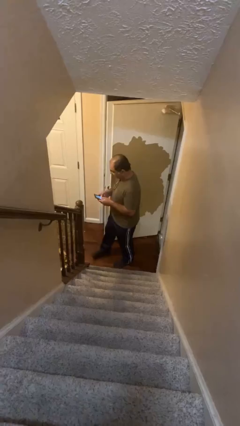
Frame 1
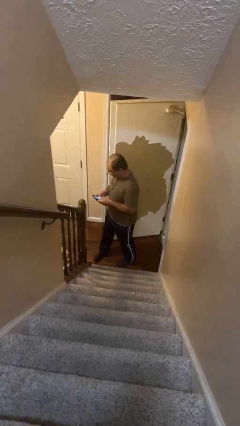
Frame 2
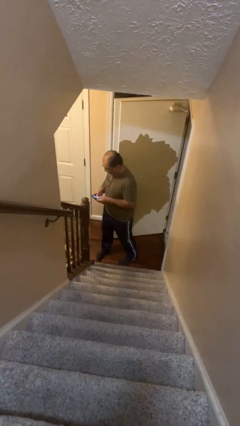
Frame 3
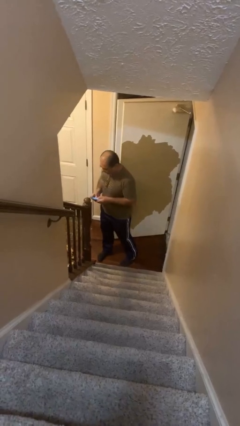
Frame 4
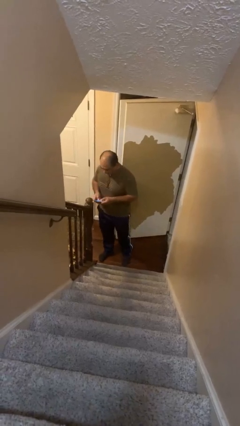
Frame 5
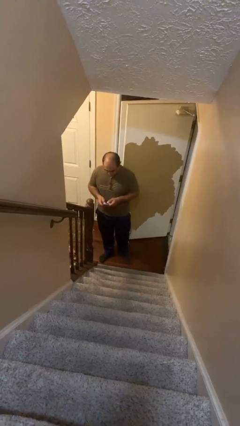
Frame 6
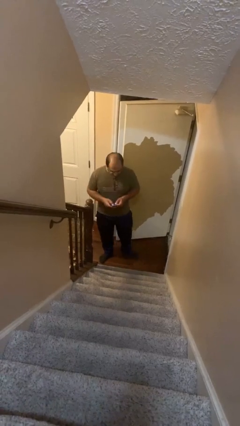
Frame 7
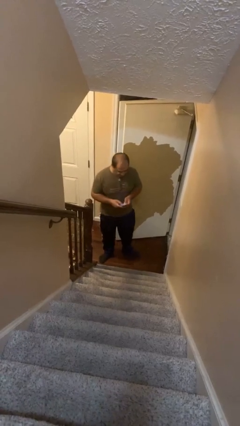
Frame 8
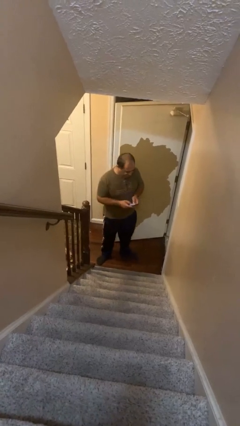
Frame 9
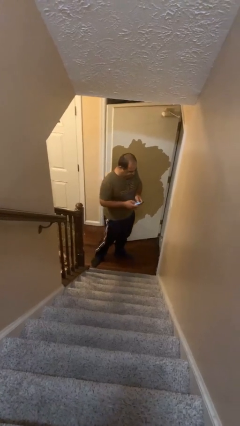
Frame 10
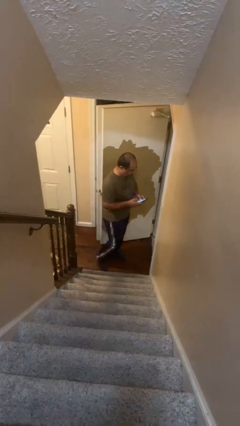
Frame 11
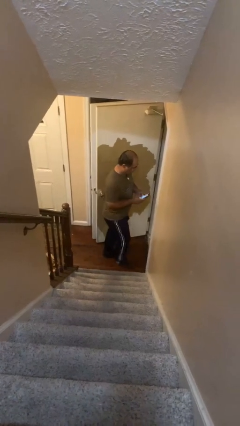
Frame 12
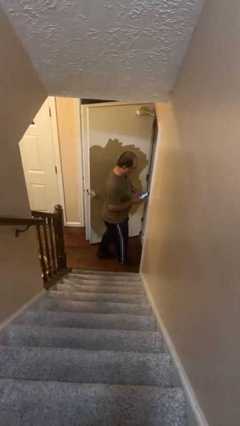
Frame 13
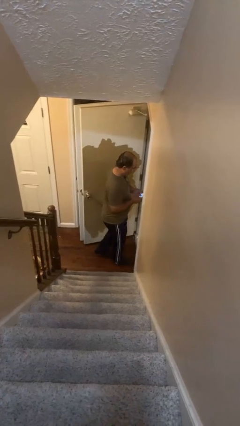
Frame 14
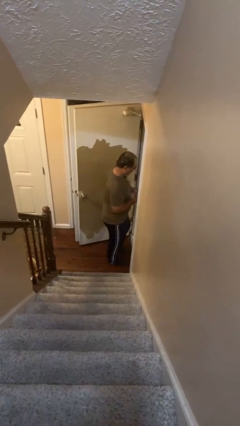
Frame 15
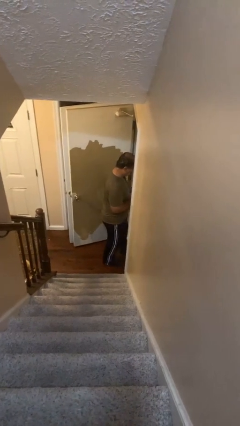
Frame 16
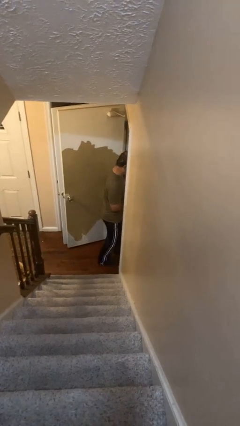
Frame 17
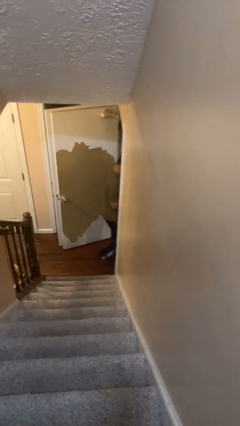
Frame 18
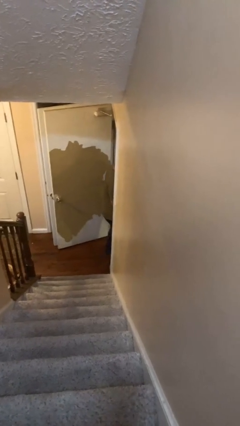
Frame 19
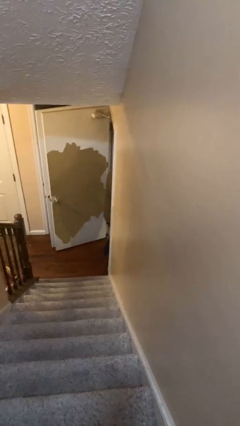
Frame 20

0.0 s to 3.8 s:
person exits scene through structure

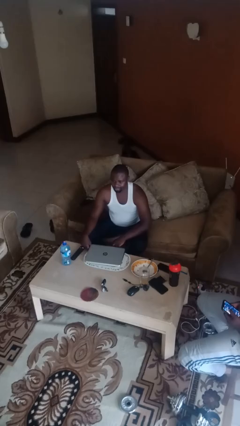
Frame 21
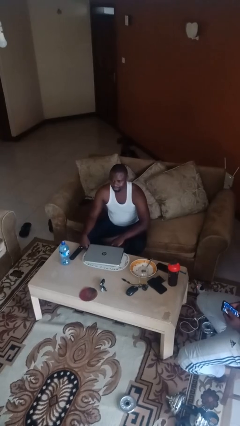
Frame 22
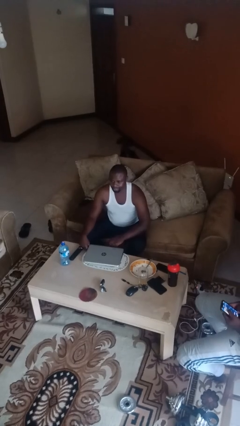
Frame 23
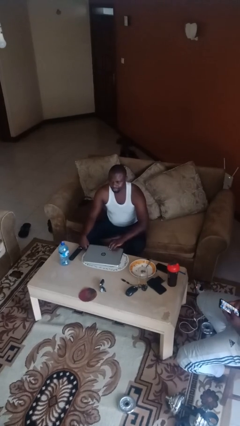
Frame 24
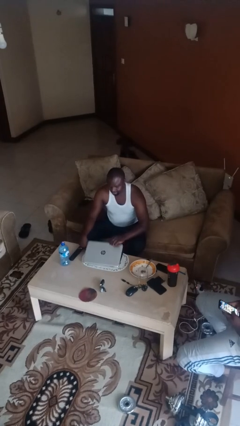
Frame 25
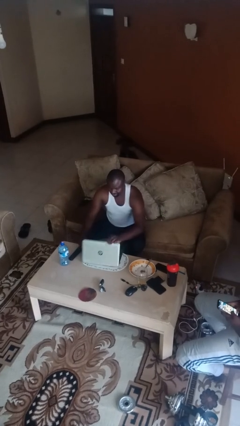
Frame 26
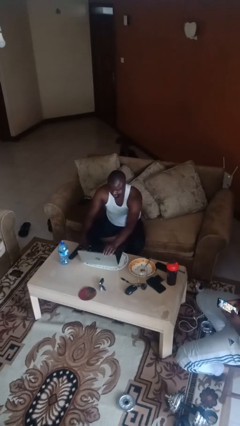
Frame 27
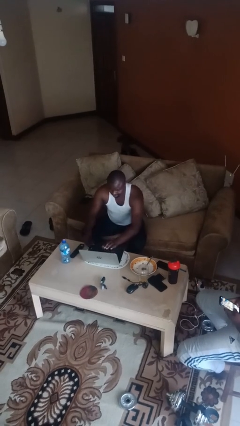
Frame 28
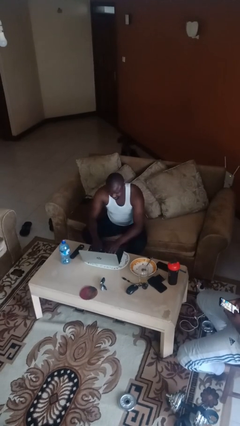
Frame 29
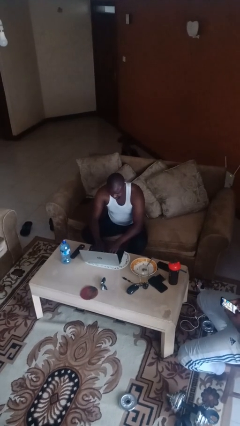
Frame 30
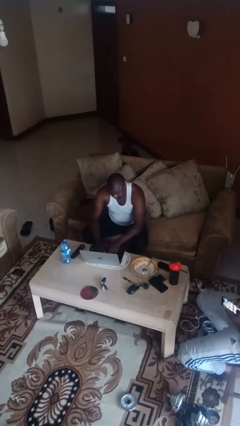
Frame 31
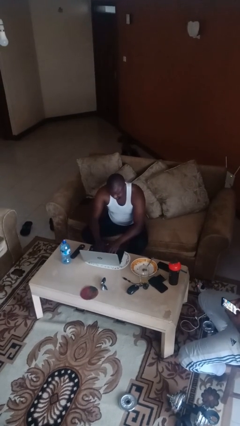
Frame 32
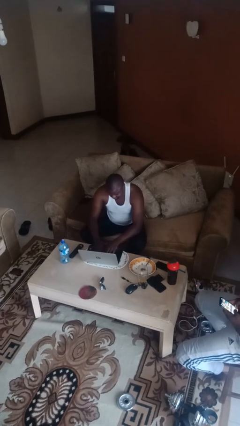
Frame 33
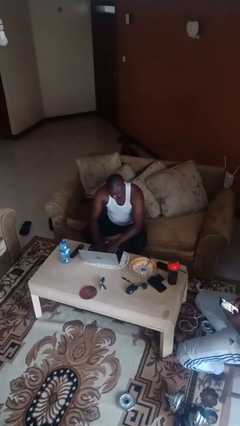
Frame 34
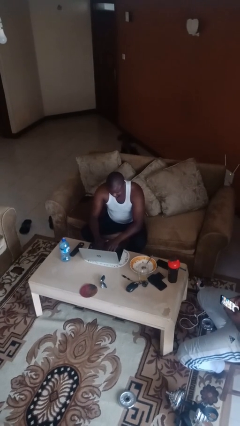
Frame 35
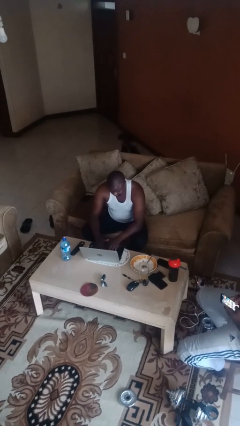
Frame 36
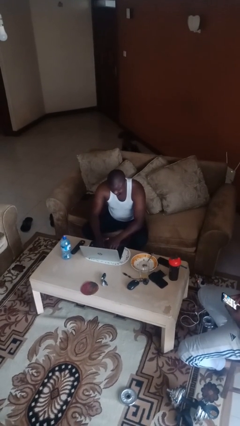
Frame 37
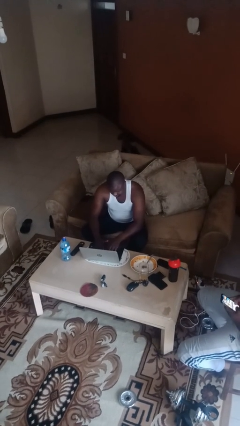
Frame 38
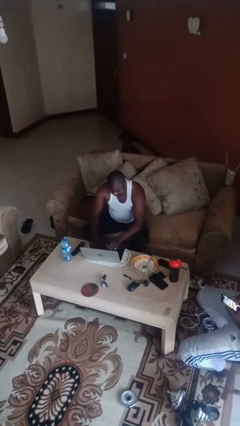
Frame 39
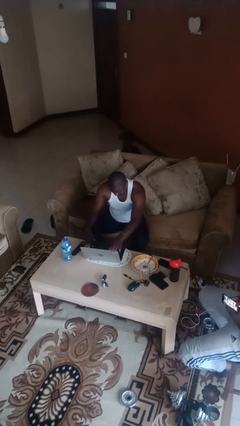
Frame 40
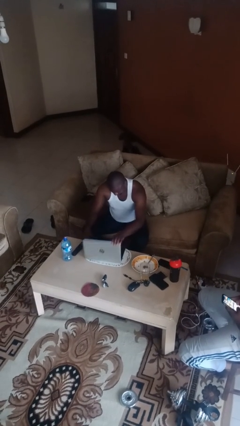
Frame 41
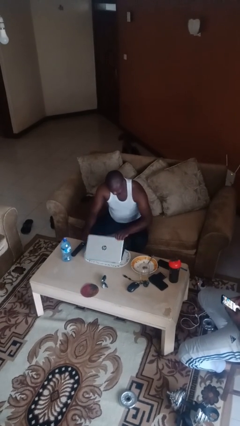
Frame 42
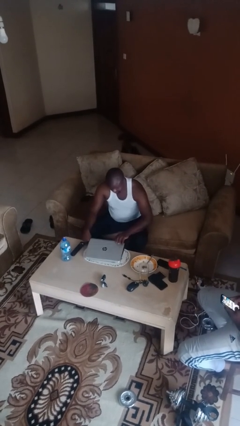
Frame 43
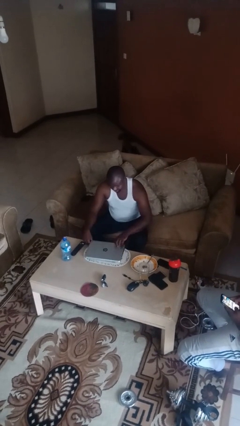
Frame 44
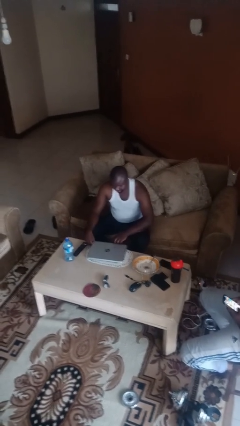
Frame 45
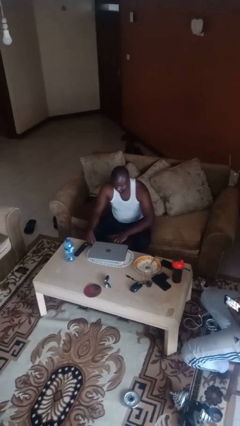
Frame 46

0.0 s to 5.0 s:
person interacts with laptop

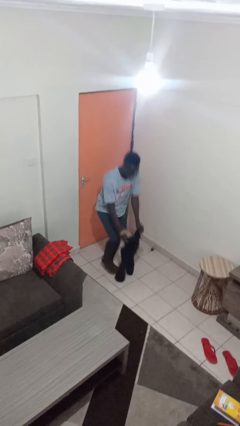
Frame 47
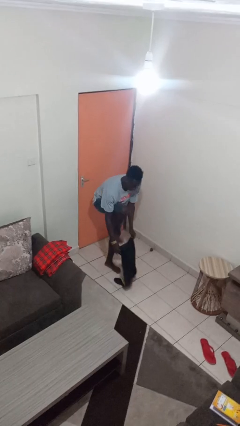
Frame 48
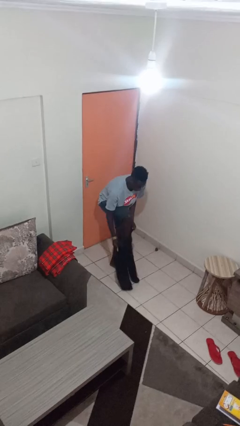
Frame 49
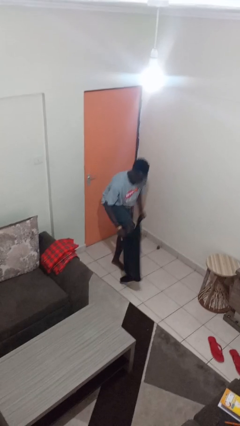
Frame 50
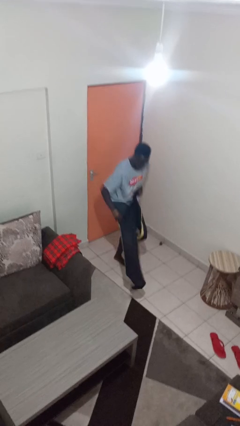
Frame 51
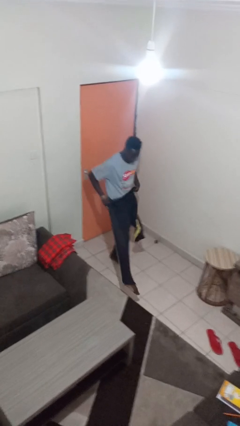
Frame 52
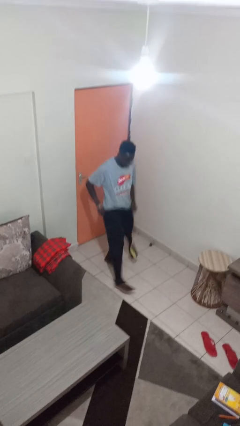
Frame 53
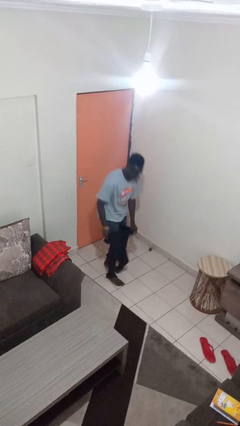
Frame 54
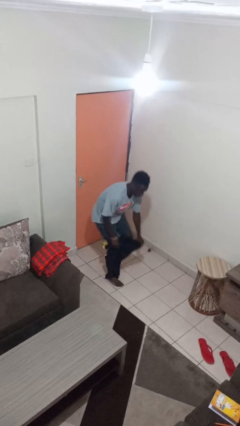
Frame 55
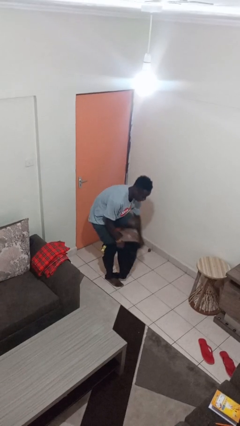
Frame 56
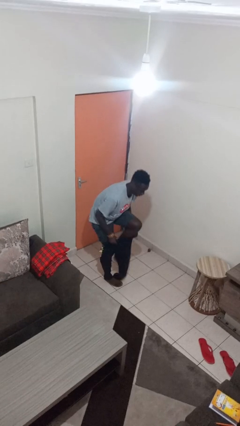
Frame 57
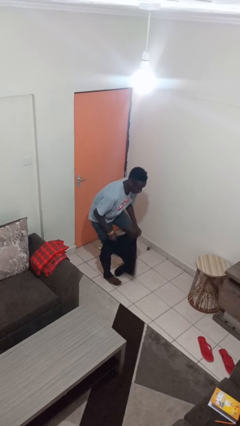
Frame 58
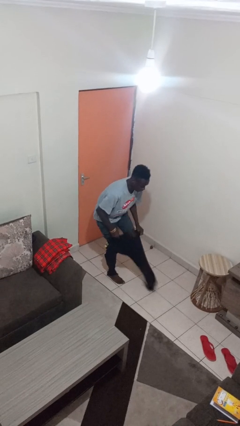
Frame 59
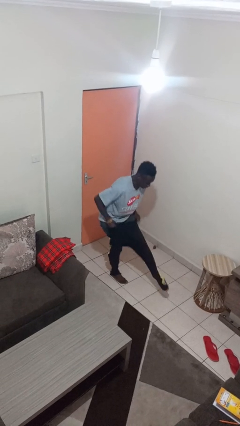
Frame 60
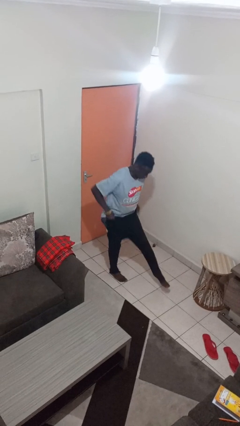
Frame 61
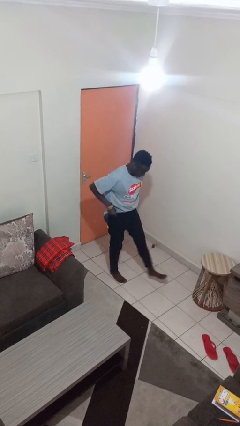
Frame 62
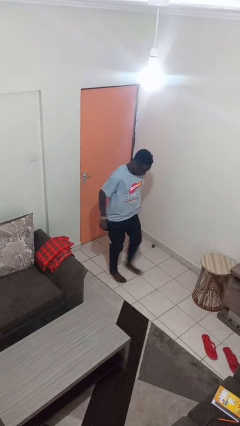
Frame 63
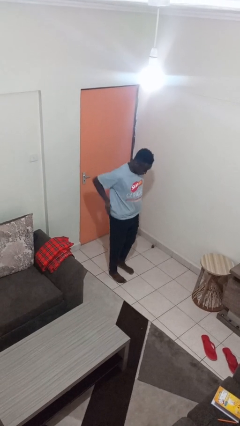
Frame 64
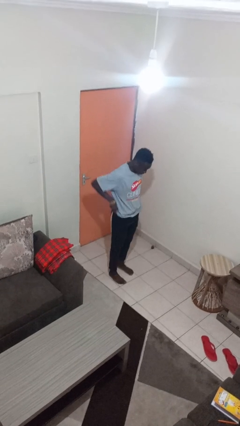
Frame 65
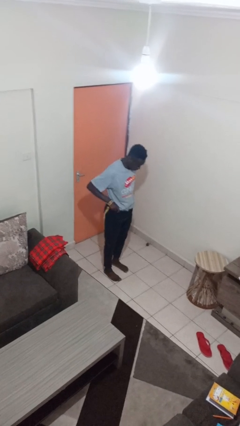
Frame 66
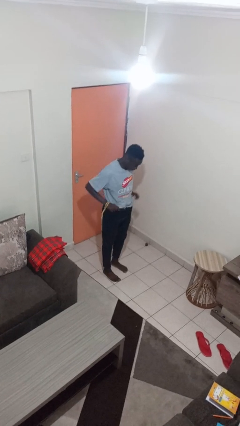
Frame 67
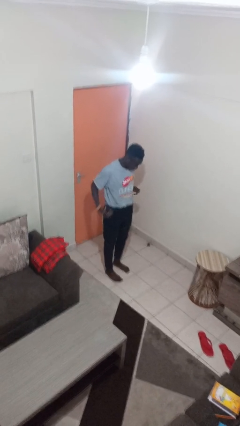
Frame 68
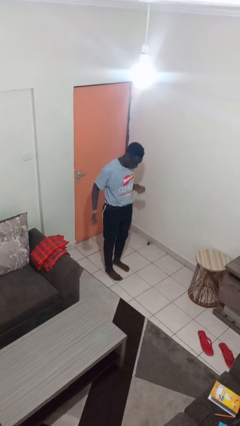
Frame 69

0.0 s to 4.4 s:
person puts on pants

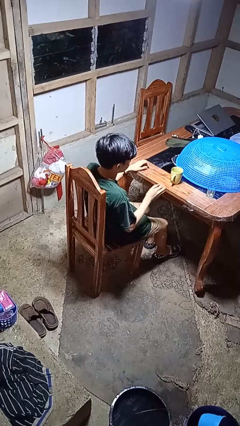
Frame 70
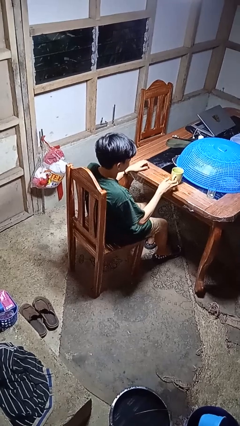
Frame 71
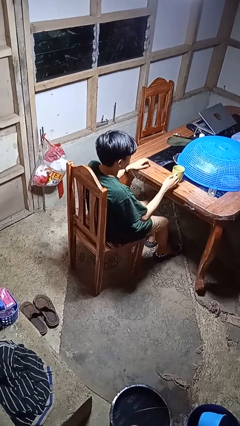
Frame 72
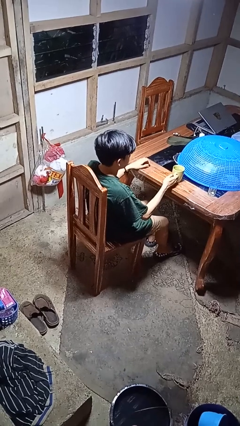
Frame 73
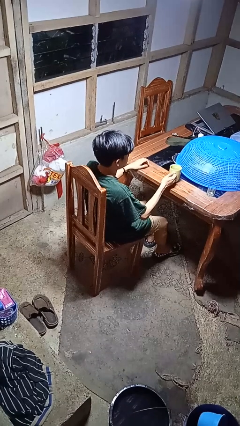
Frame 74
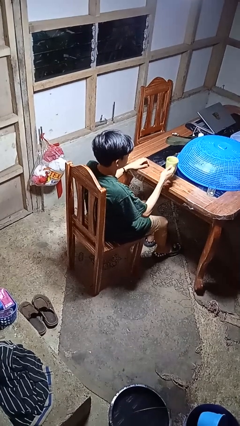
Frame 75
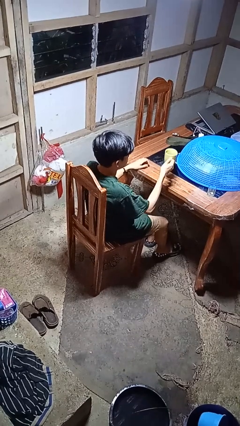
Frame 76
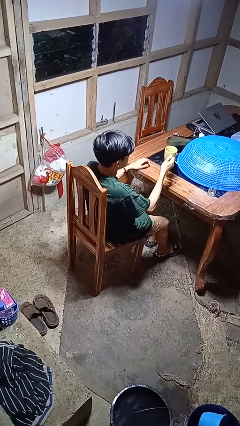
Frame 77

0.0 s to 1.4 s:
person picks up object from table

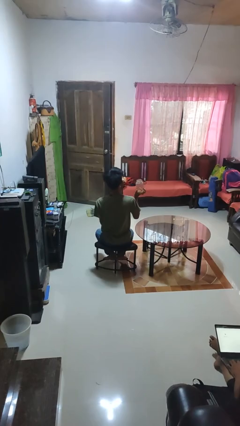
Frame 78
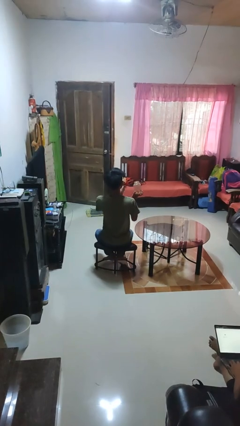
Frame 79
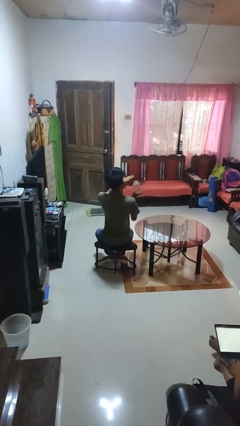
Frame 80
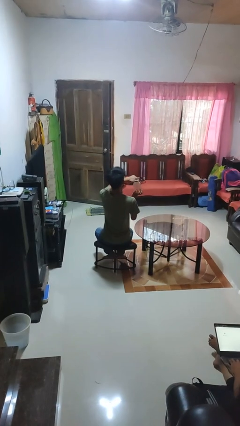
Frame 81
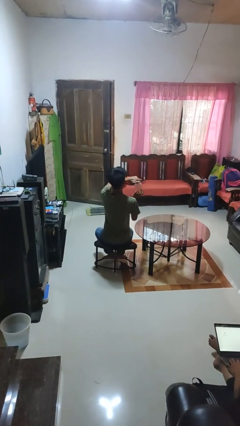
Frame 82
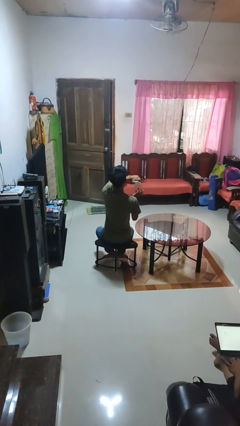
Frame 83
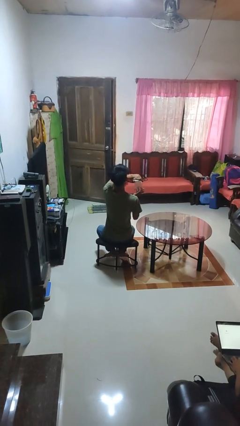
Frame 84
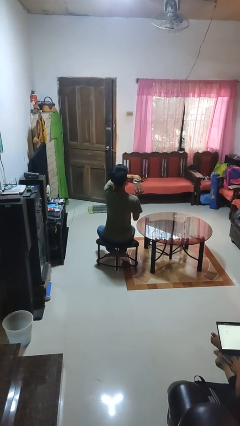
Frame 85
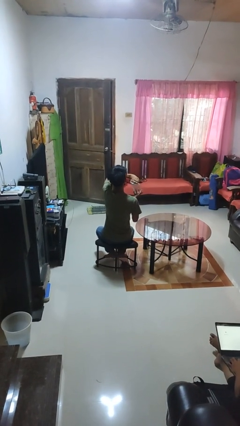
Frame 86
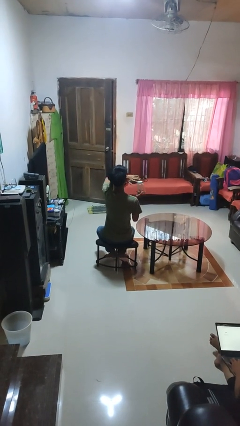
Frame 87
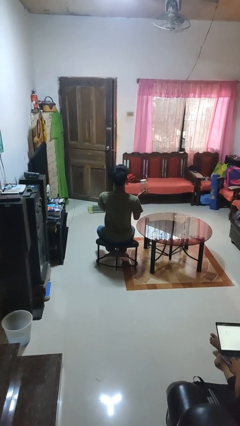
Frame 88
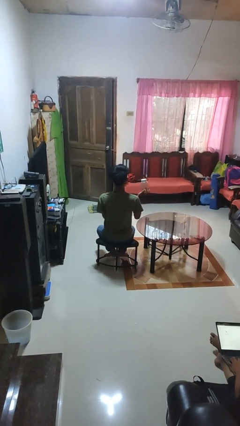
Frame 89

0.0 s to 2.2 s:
person closes jar

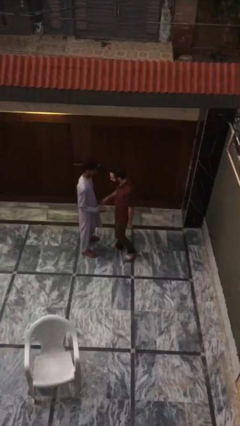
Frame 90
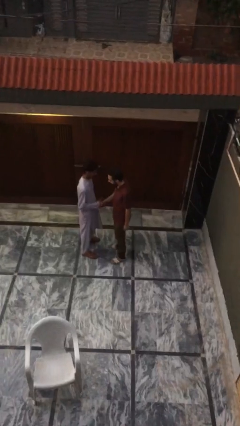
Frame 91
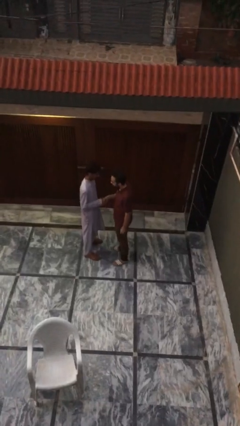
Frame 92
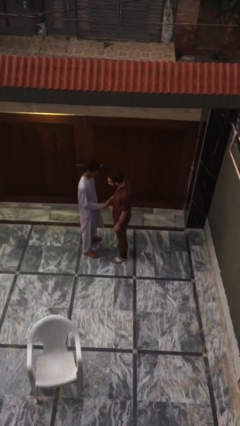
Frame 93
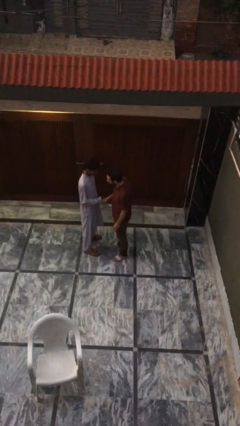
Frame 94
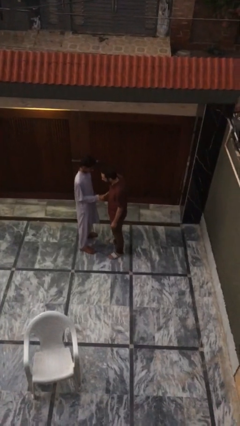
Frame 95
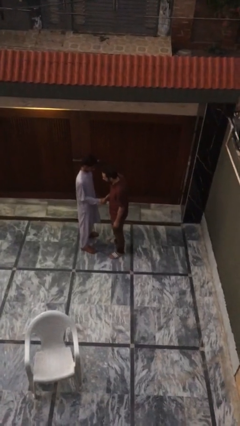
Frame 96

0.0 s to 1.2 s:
person shakes hand
